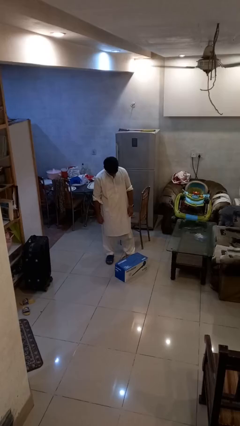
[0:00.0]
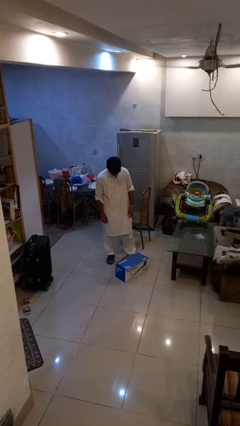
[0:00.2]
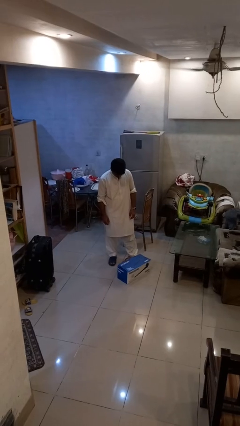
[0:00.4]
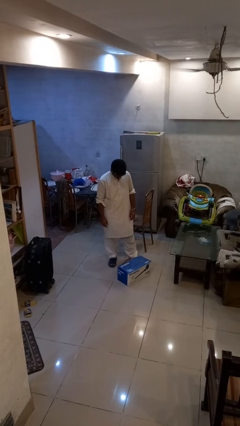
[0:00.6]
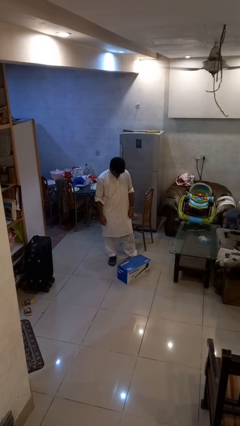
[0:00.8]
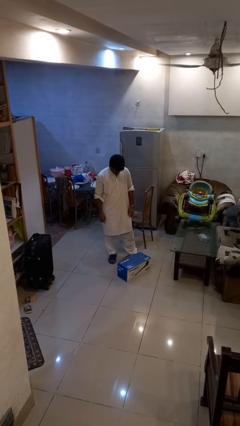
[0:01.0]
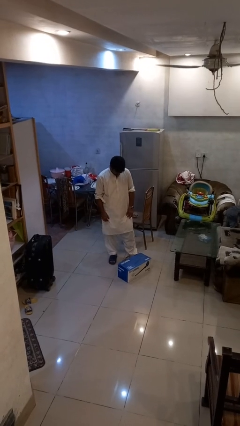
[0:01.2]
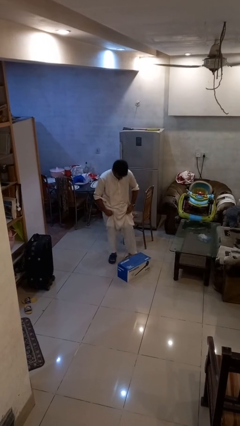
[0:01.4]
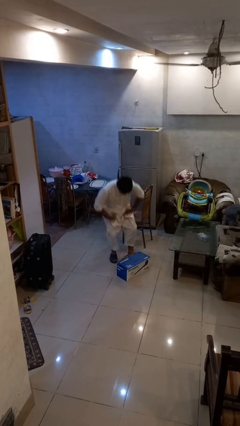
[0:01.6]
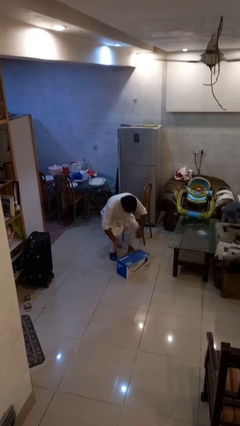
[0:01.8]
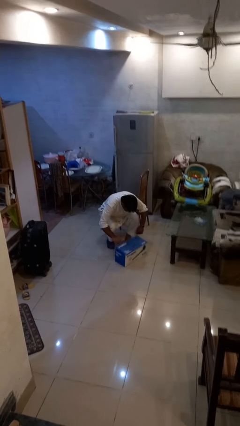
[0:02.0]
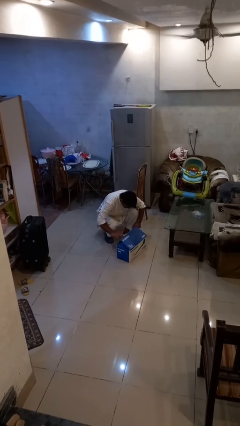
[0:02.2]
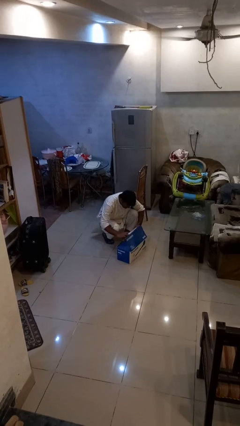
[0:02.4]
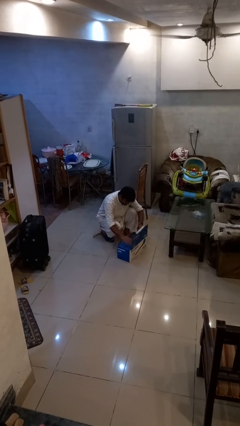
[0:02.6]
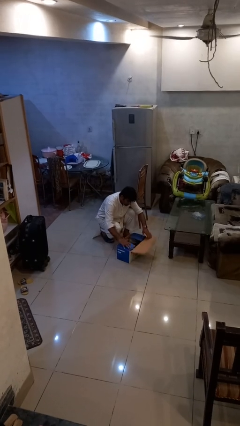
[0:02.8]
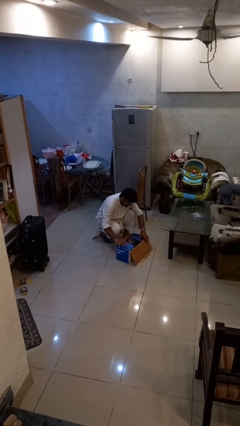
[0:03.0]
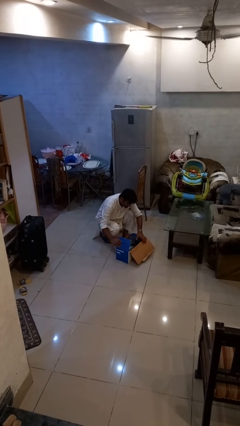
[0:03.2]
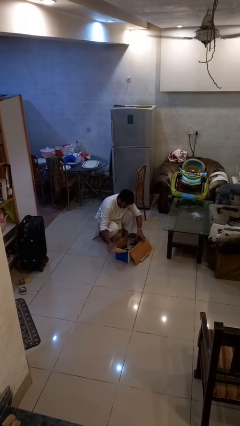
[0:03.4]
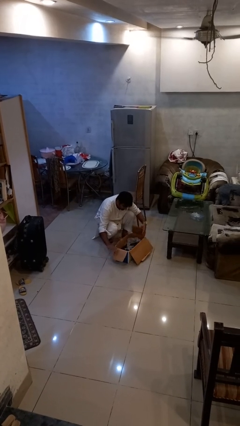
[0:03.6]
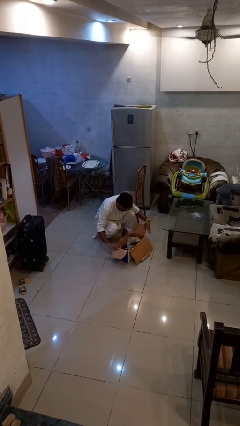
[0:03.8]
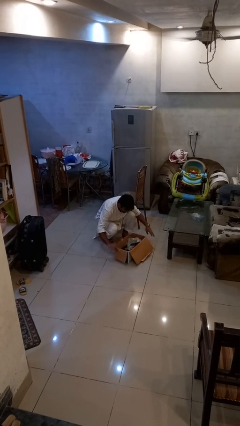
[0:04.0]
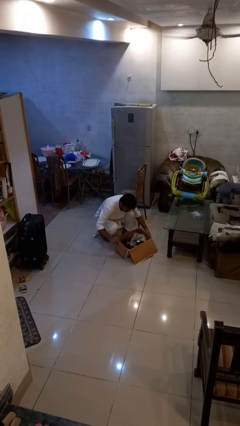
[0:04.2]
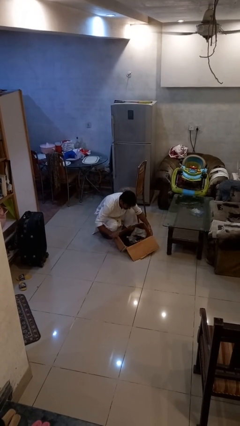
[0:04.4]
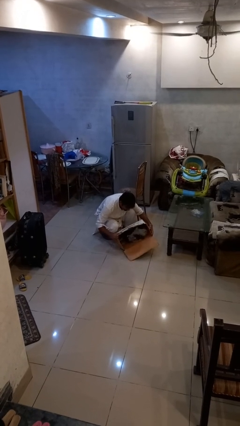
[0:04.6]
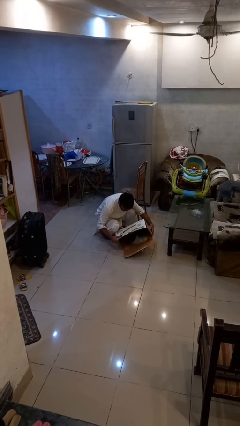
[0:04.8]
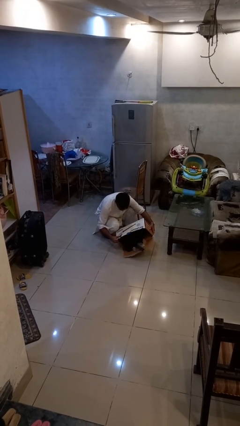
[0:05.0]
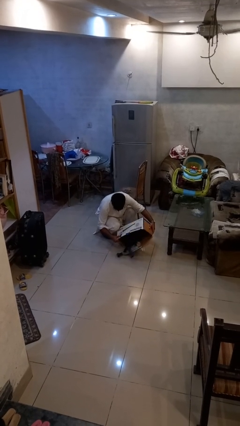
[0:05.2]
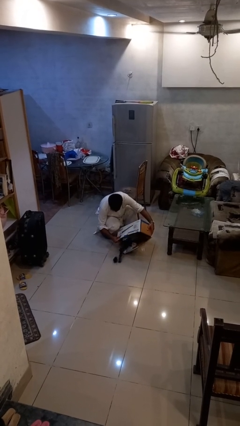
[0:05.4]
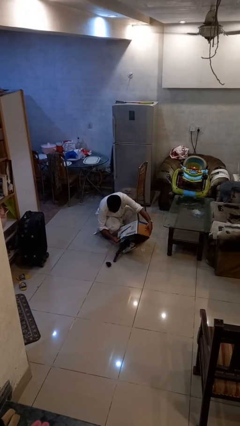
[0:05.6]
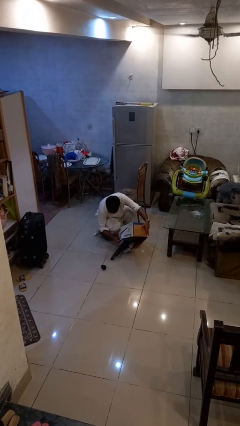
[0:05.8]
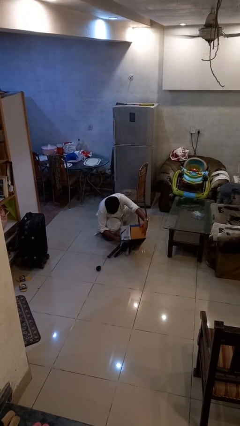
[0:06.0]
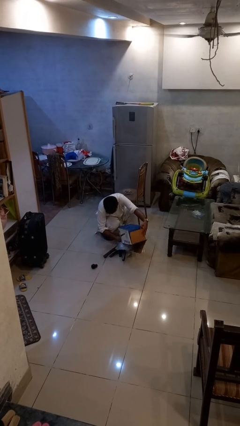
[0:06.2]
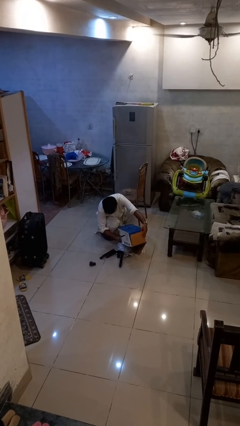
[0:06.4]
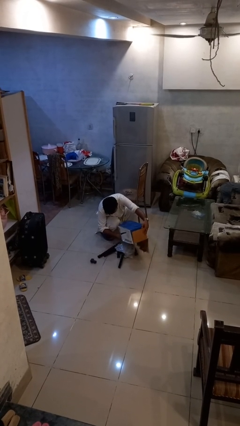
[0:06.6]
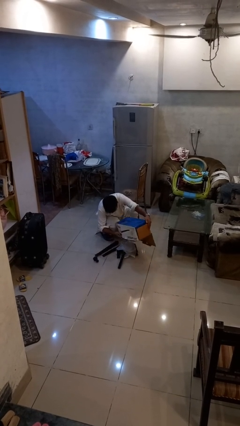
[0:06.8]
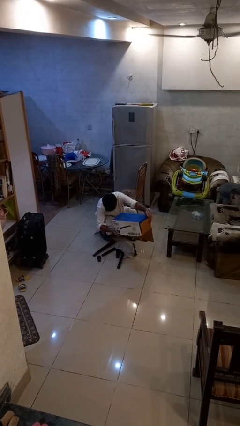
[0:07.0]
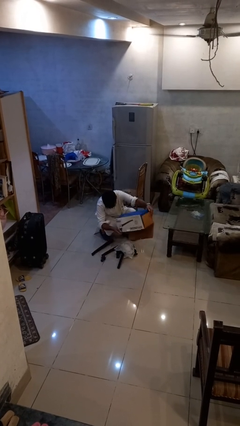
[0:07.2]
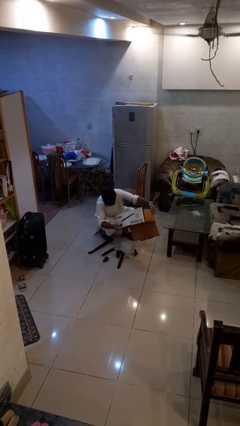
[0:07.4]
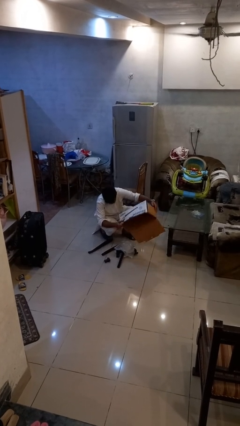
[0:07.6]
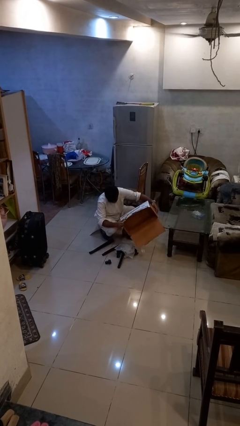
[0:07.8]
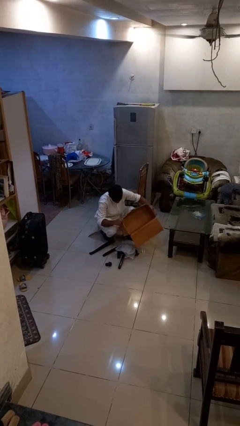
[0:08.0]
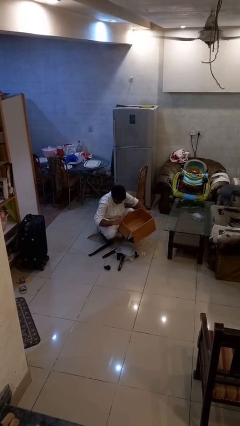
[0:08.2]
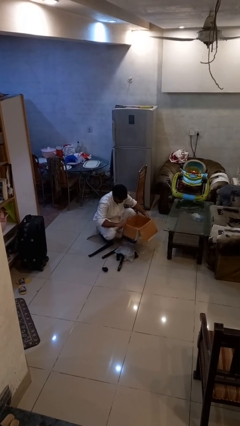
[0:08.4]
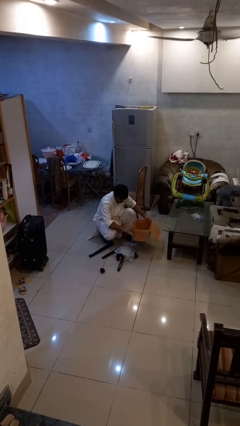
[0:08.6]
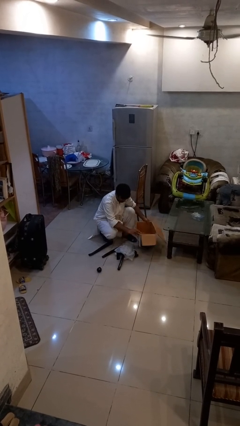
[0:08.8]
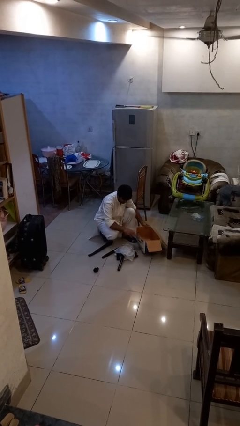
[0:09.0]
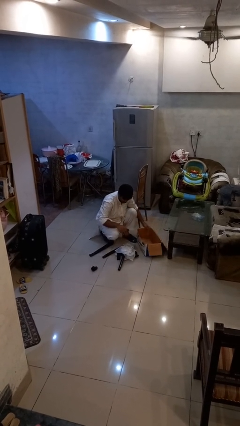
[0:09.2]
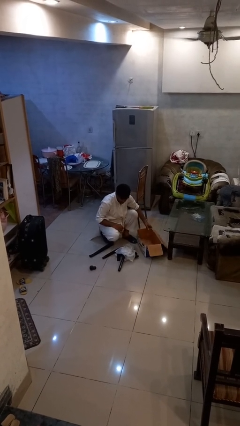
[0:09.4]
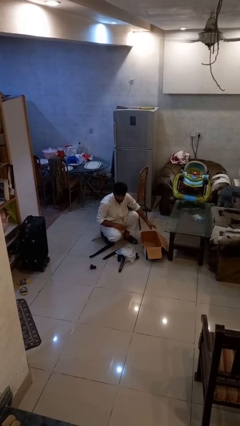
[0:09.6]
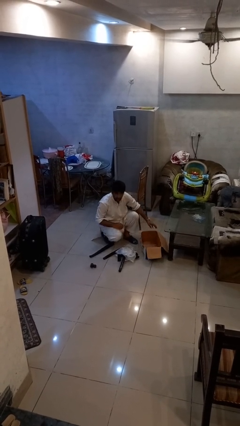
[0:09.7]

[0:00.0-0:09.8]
person unloads box onto floor

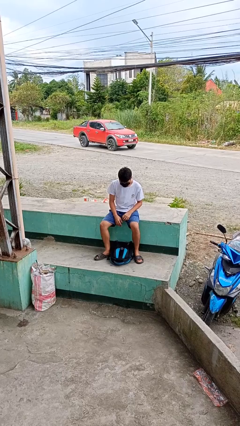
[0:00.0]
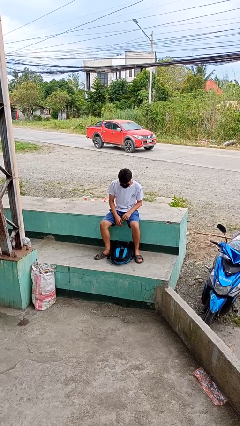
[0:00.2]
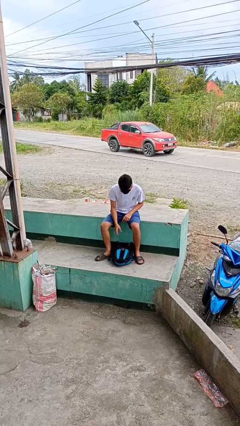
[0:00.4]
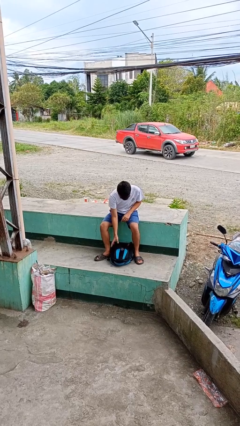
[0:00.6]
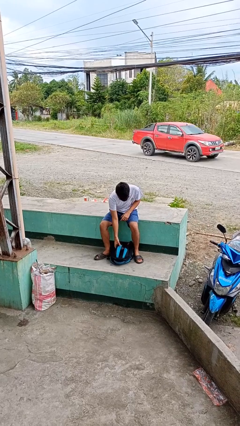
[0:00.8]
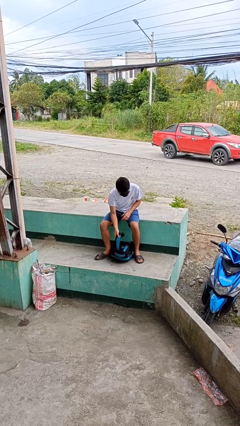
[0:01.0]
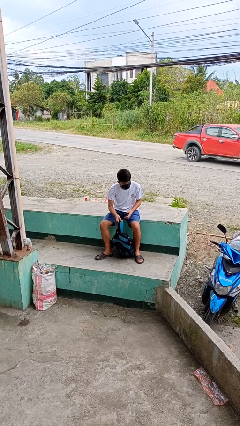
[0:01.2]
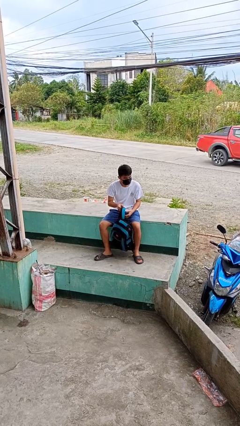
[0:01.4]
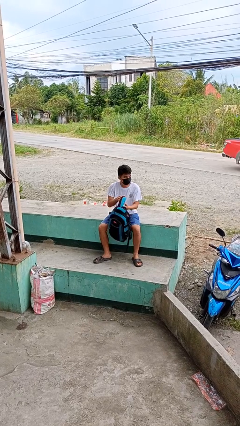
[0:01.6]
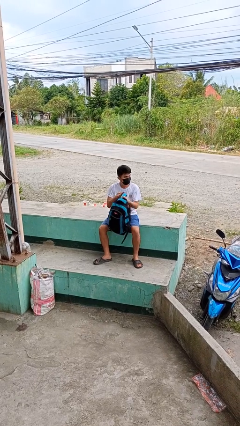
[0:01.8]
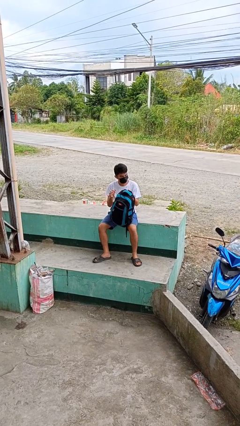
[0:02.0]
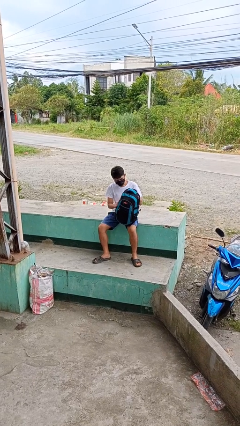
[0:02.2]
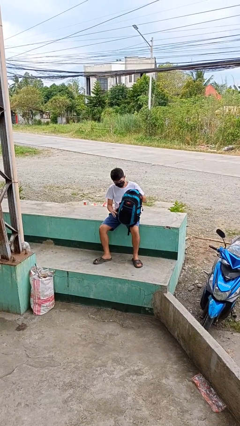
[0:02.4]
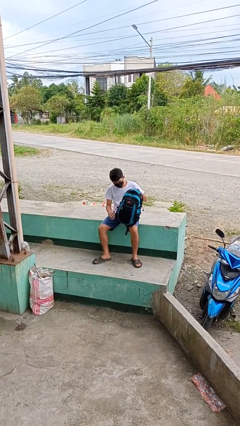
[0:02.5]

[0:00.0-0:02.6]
person picks up object from floor

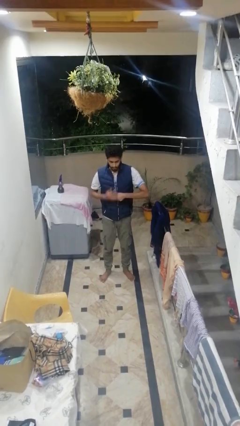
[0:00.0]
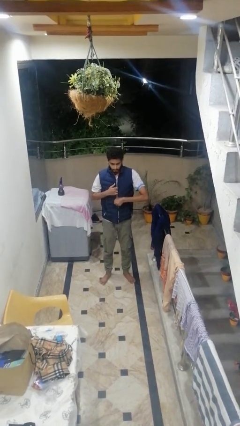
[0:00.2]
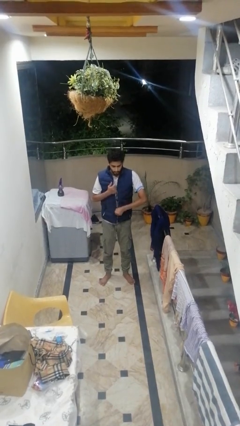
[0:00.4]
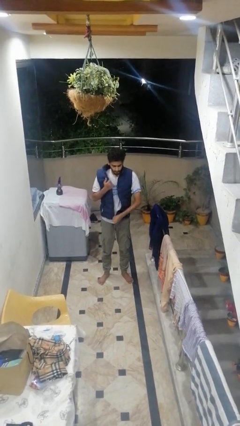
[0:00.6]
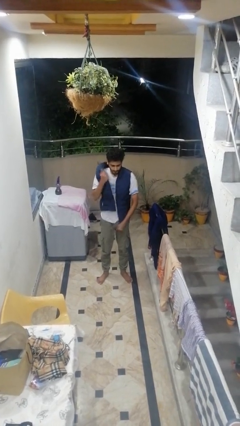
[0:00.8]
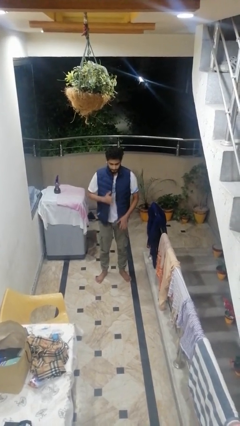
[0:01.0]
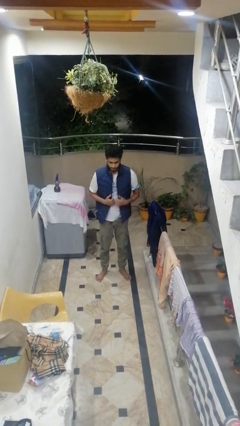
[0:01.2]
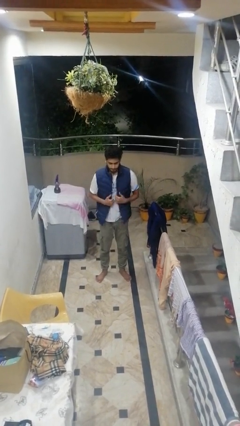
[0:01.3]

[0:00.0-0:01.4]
person unzips jacket

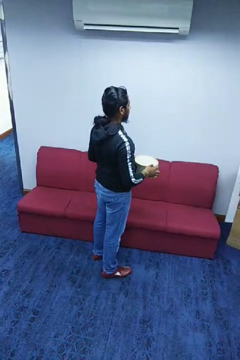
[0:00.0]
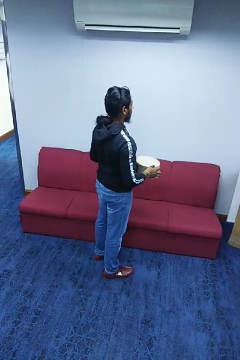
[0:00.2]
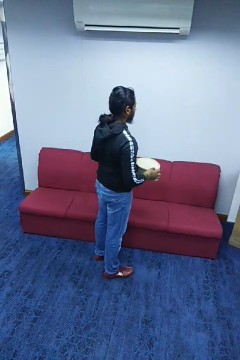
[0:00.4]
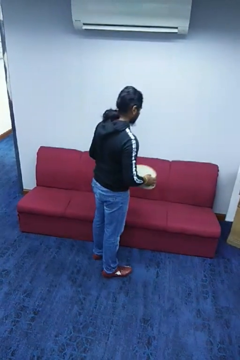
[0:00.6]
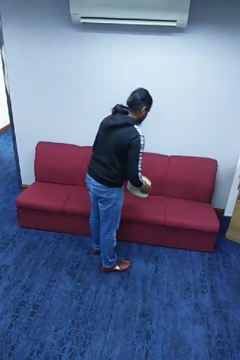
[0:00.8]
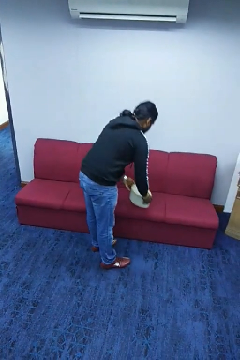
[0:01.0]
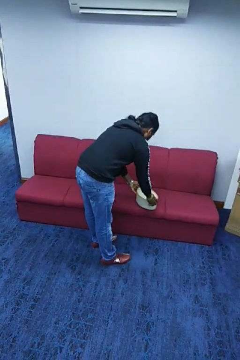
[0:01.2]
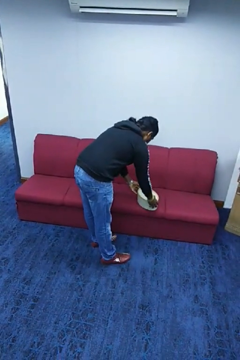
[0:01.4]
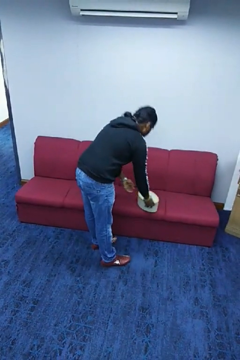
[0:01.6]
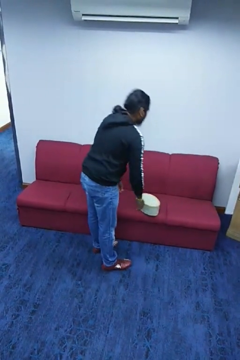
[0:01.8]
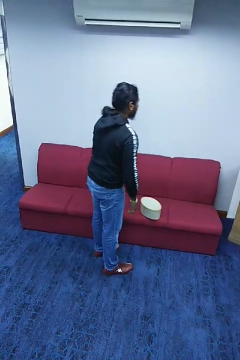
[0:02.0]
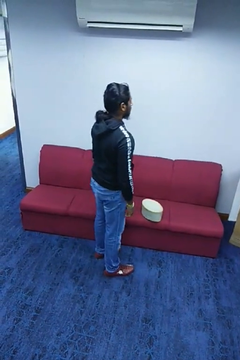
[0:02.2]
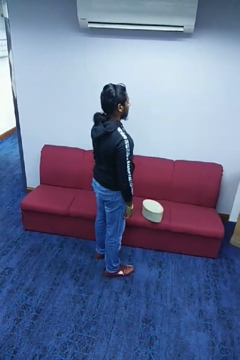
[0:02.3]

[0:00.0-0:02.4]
person puts down object on couch

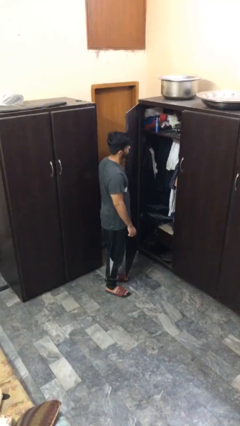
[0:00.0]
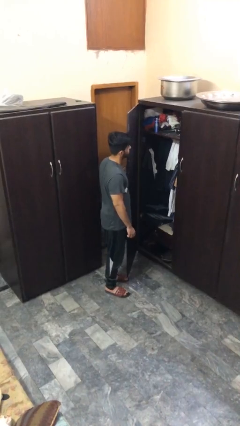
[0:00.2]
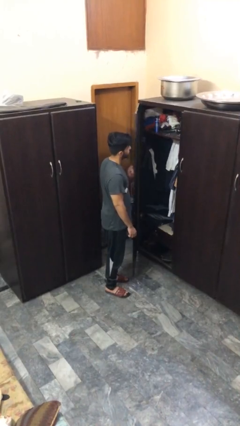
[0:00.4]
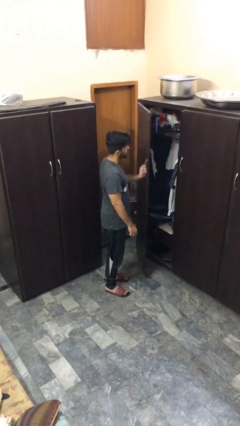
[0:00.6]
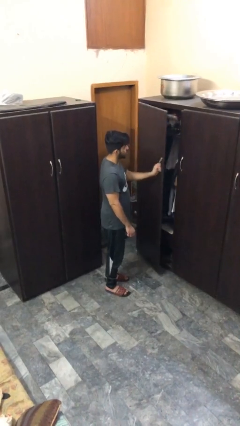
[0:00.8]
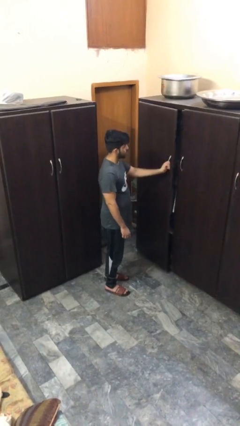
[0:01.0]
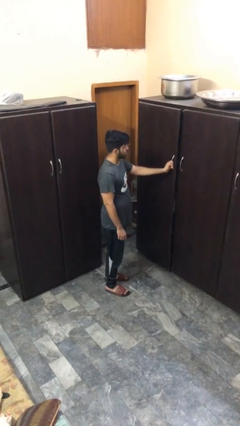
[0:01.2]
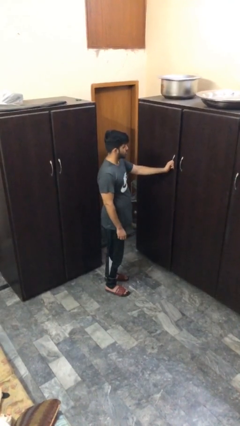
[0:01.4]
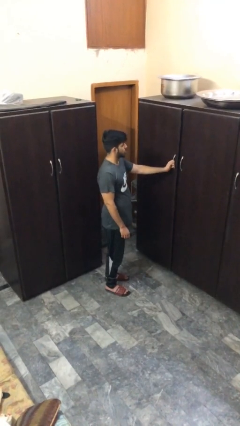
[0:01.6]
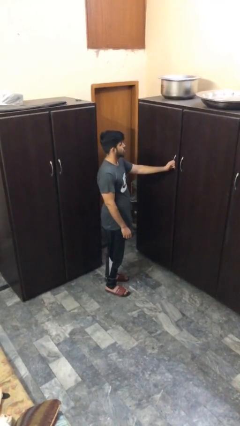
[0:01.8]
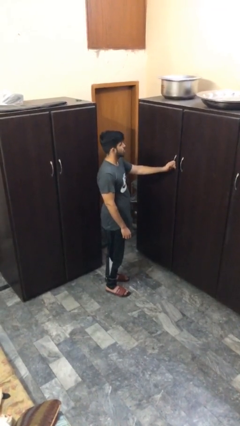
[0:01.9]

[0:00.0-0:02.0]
person closes dresser drawer
